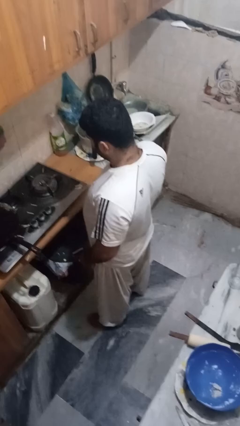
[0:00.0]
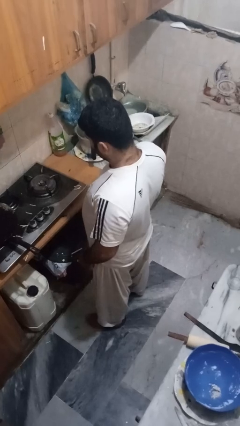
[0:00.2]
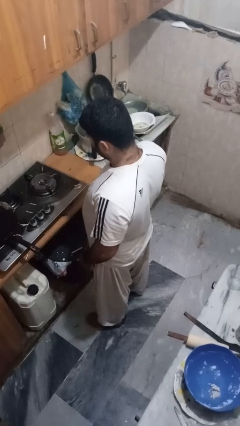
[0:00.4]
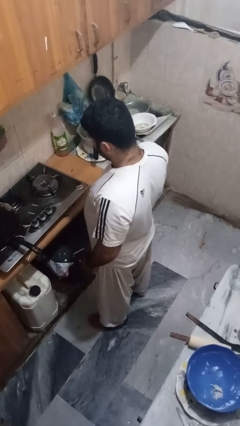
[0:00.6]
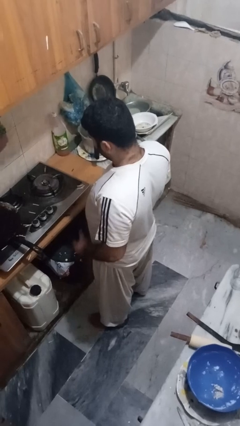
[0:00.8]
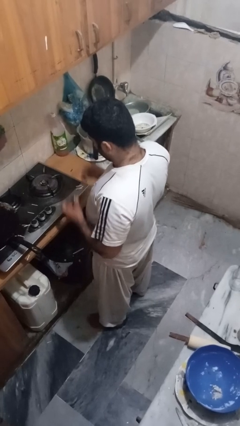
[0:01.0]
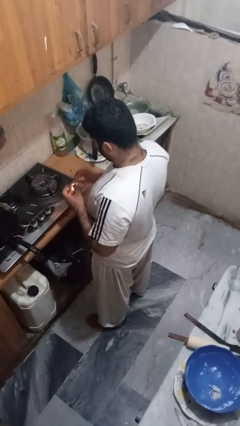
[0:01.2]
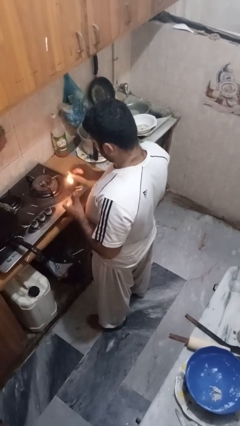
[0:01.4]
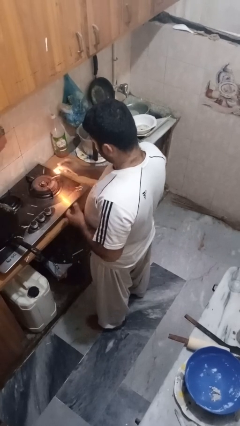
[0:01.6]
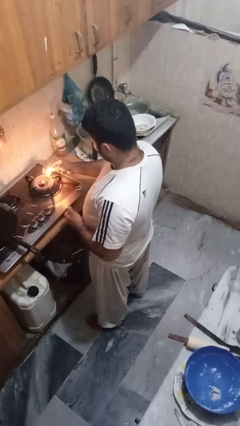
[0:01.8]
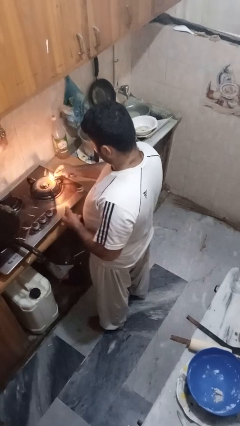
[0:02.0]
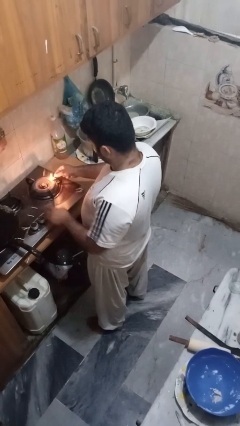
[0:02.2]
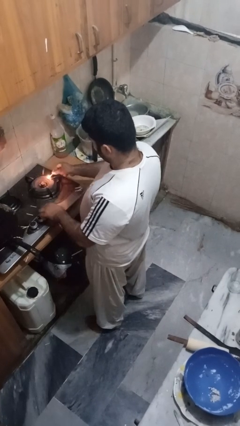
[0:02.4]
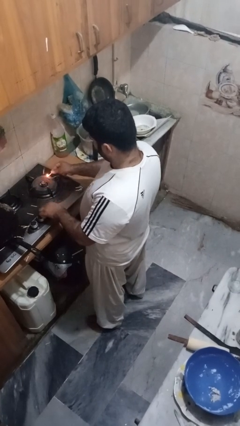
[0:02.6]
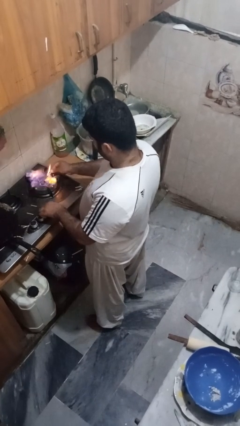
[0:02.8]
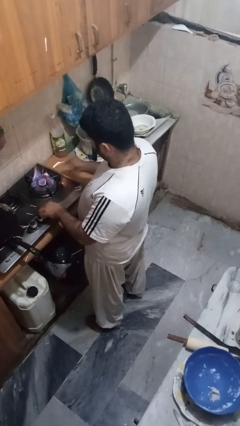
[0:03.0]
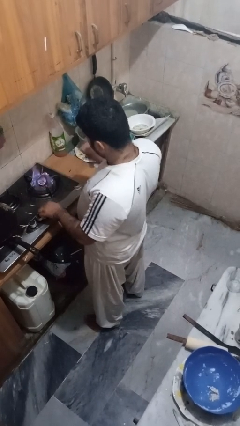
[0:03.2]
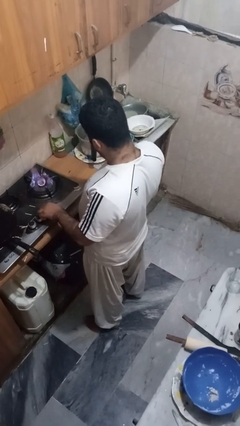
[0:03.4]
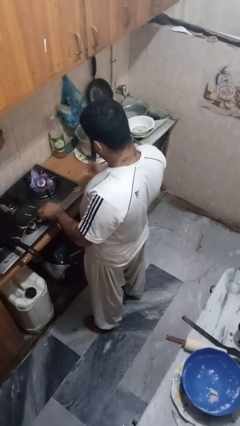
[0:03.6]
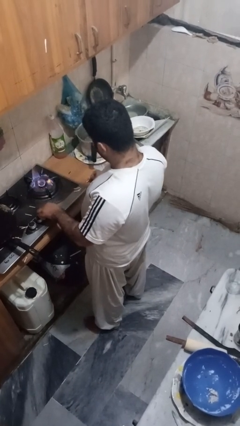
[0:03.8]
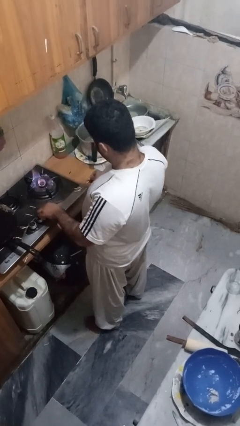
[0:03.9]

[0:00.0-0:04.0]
person turns on stovetop

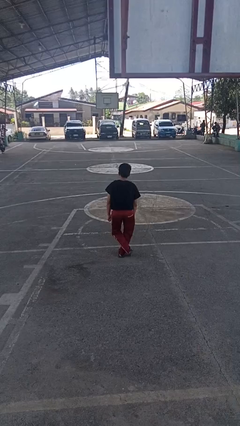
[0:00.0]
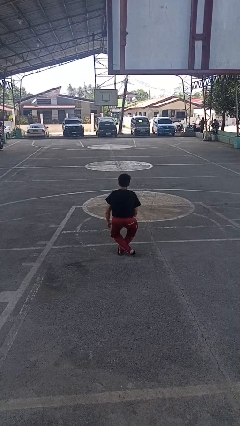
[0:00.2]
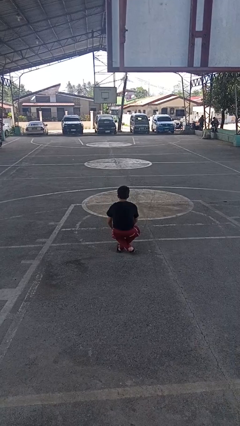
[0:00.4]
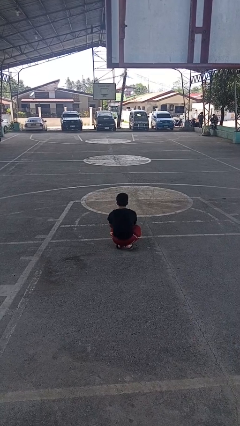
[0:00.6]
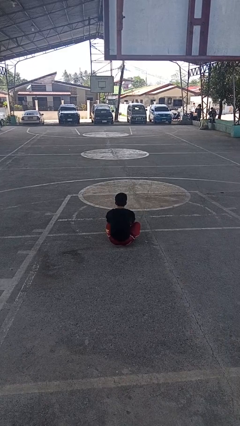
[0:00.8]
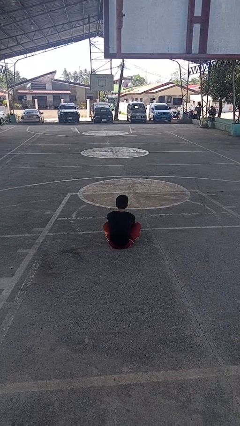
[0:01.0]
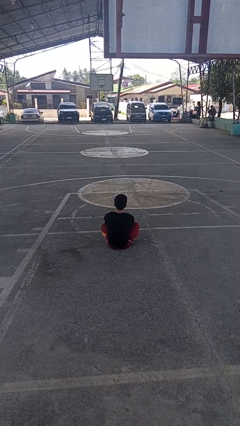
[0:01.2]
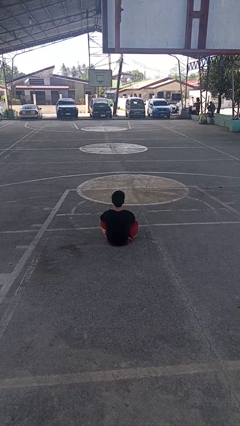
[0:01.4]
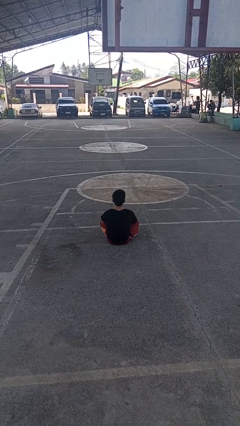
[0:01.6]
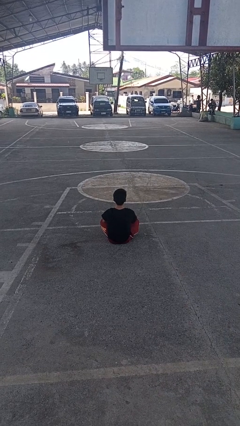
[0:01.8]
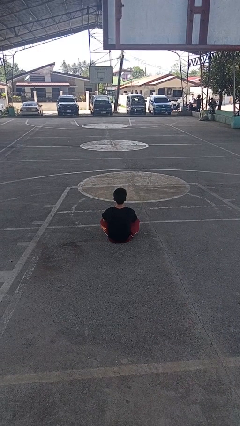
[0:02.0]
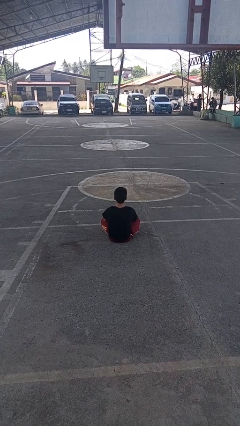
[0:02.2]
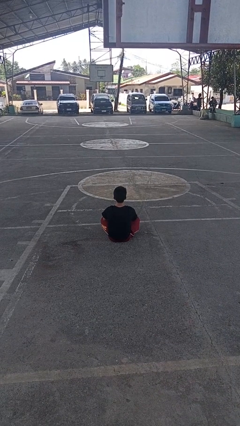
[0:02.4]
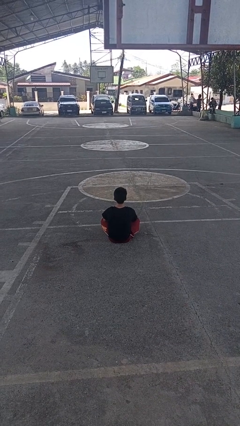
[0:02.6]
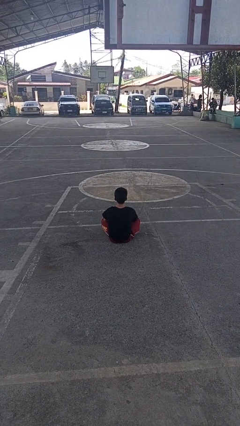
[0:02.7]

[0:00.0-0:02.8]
person sits crisscross

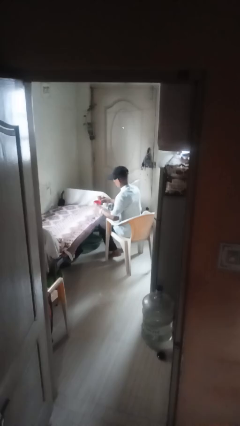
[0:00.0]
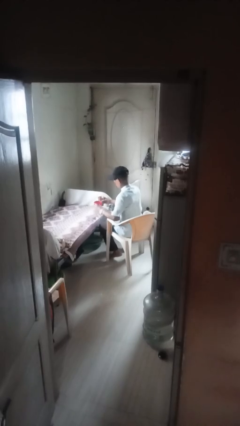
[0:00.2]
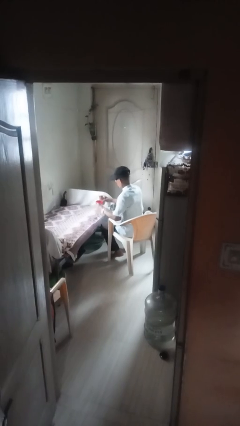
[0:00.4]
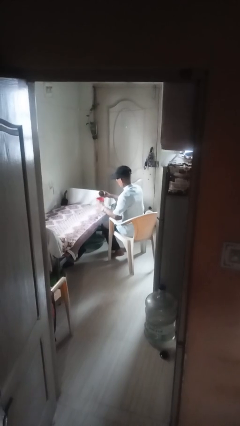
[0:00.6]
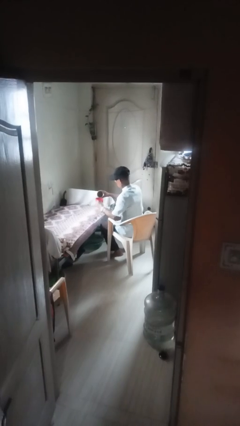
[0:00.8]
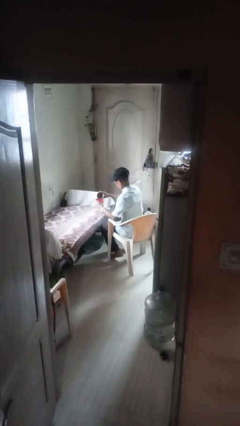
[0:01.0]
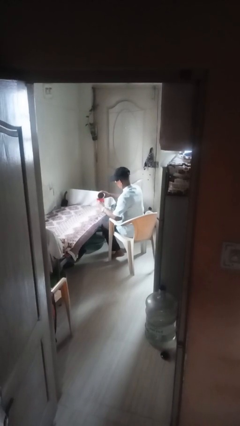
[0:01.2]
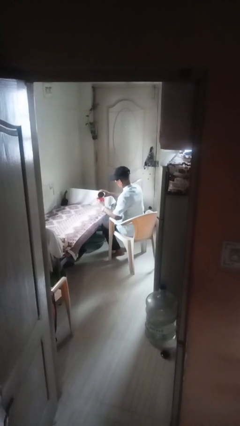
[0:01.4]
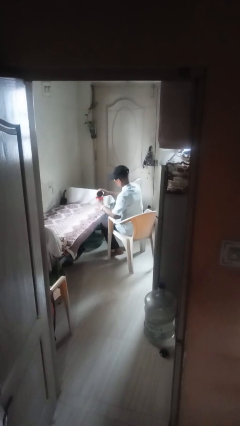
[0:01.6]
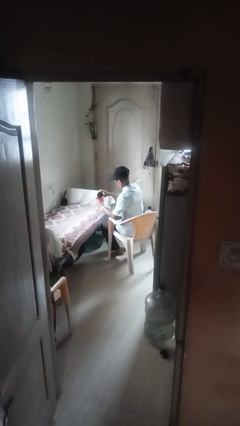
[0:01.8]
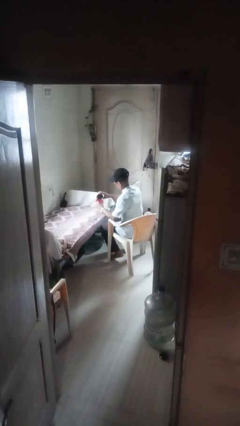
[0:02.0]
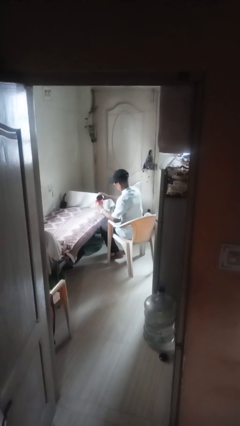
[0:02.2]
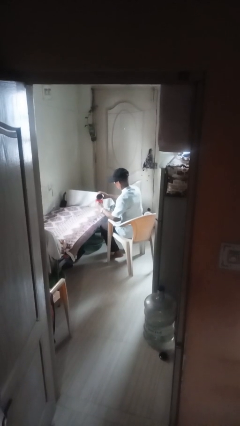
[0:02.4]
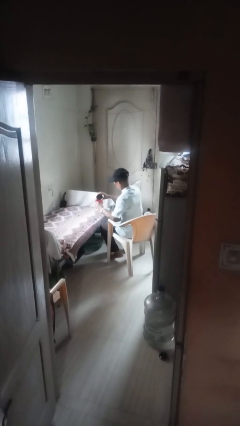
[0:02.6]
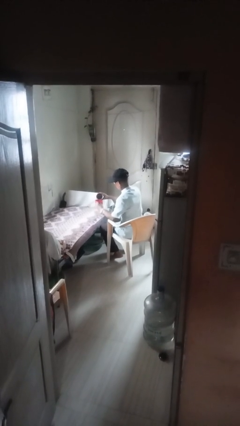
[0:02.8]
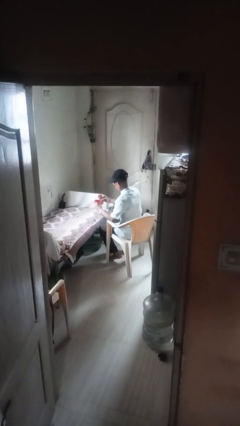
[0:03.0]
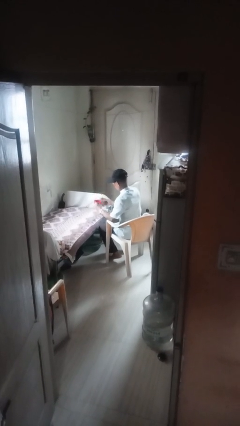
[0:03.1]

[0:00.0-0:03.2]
person pours coffee into mug

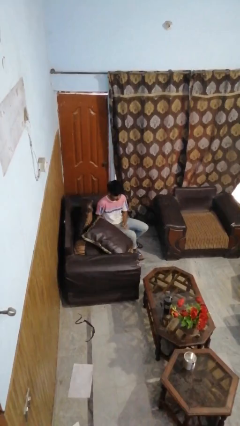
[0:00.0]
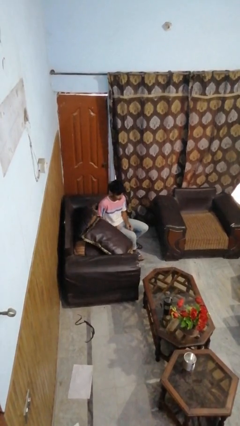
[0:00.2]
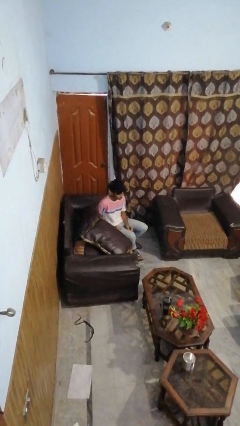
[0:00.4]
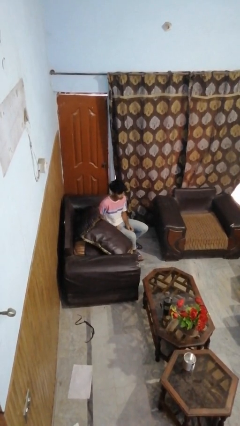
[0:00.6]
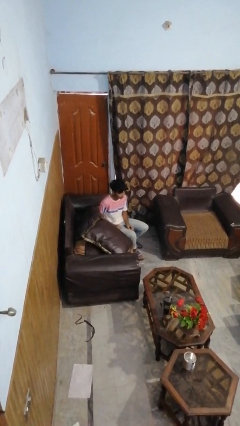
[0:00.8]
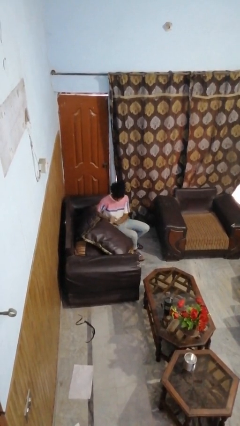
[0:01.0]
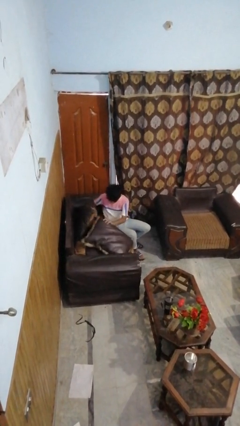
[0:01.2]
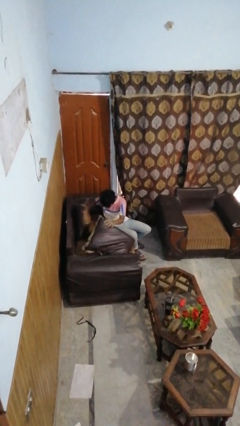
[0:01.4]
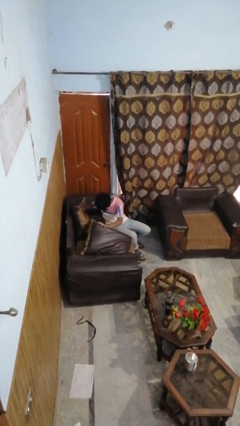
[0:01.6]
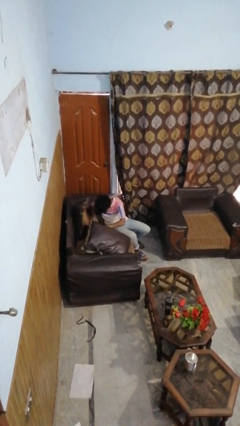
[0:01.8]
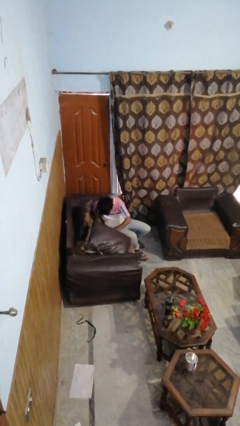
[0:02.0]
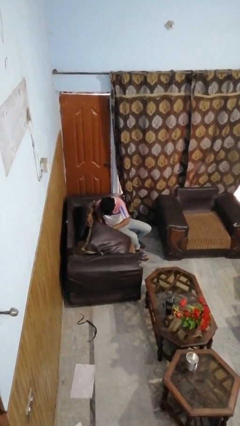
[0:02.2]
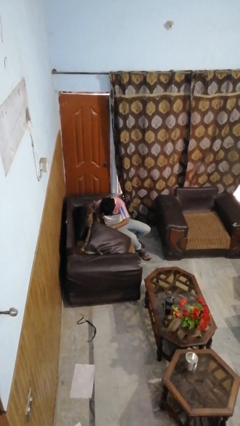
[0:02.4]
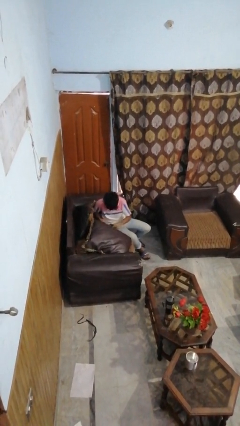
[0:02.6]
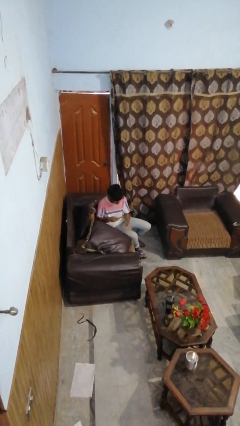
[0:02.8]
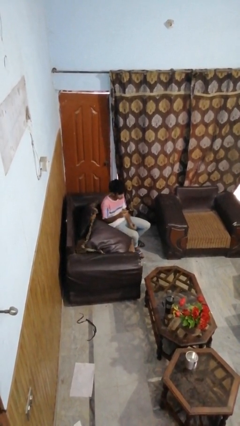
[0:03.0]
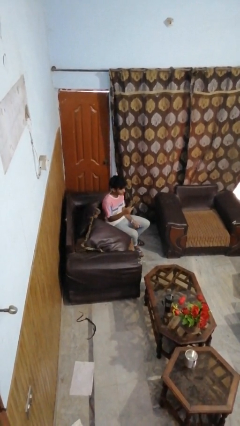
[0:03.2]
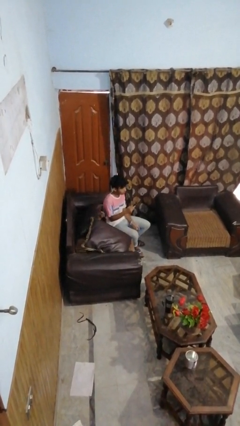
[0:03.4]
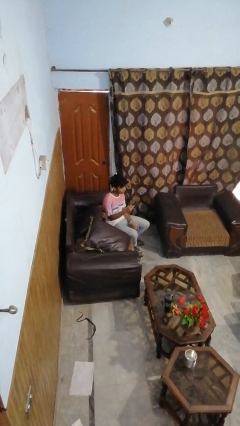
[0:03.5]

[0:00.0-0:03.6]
person searches in couch

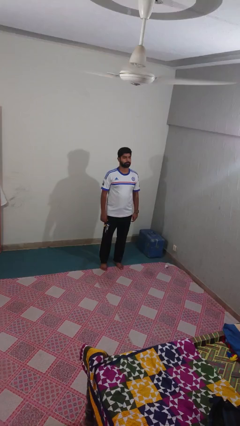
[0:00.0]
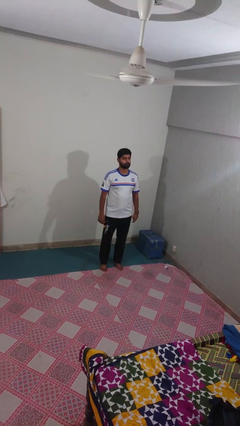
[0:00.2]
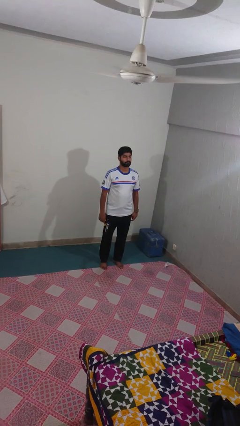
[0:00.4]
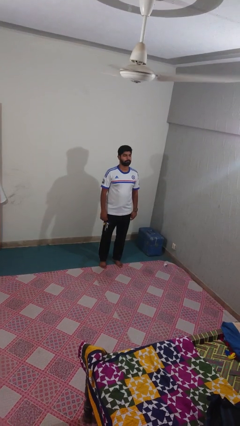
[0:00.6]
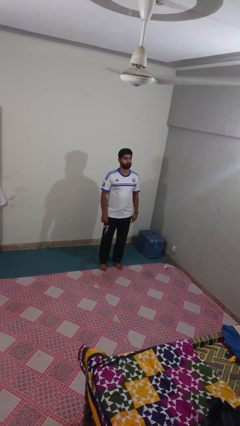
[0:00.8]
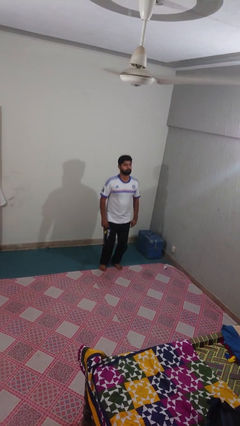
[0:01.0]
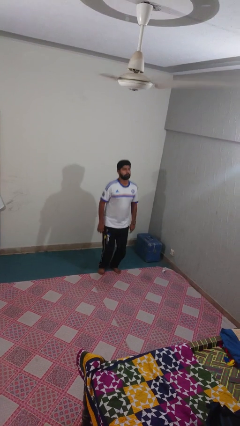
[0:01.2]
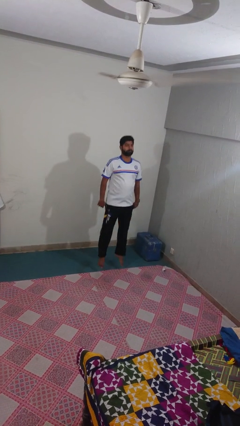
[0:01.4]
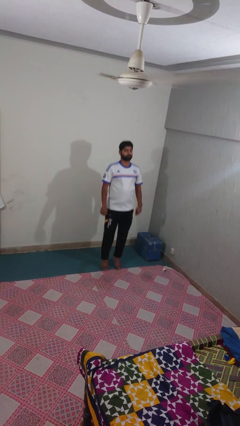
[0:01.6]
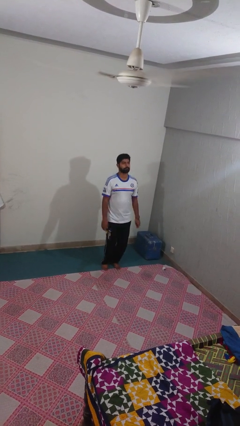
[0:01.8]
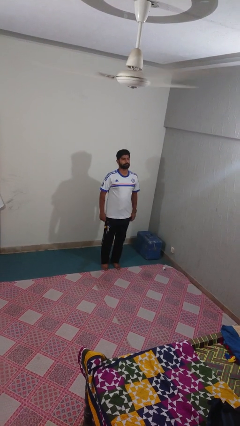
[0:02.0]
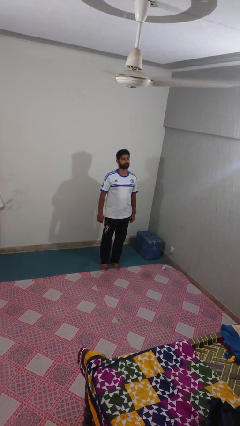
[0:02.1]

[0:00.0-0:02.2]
person jumps

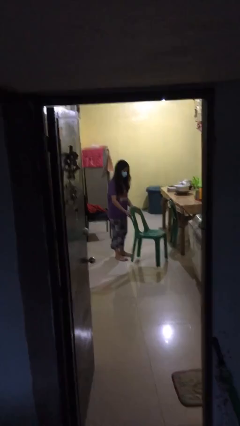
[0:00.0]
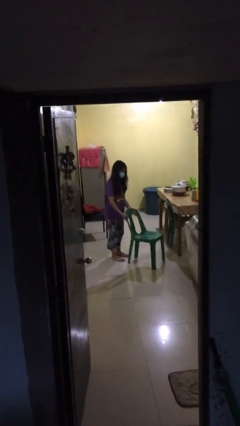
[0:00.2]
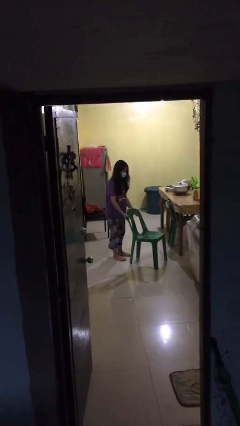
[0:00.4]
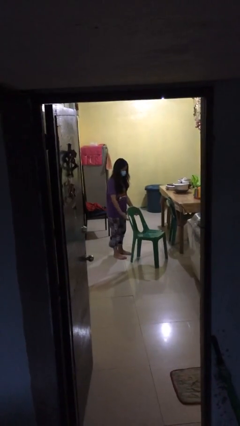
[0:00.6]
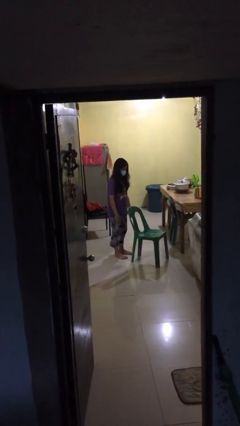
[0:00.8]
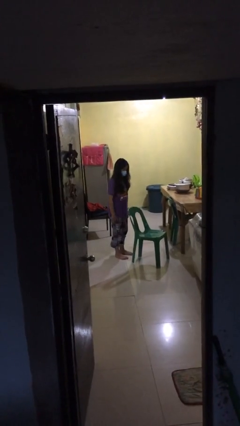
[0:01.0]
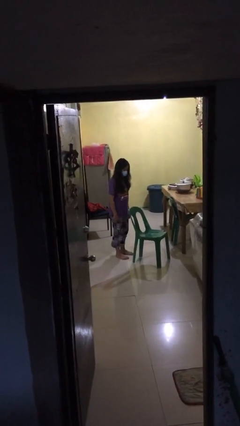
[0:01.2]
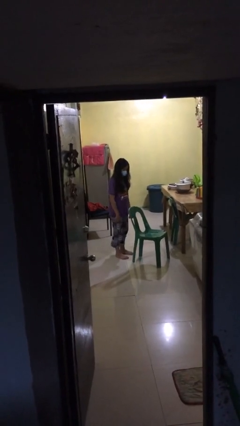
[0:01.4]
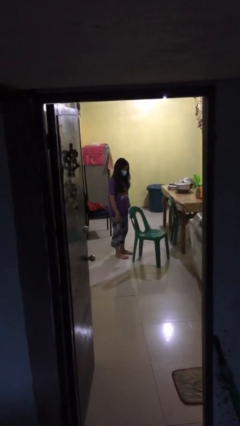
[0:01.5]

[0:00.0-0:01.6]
person puts down object on floor
